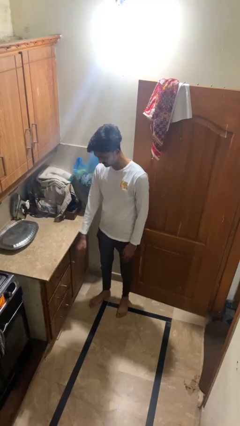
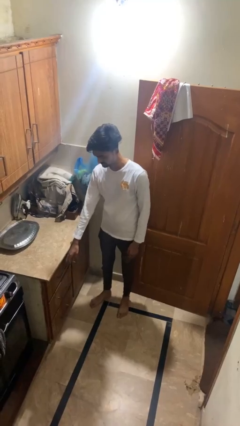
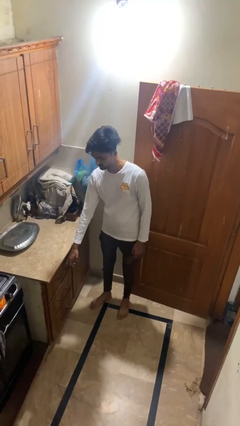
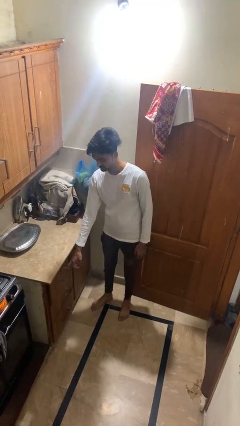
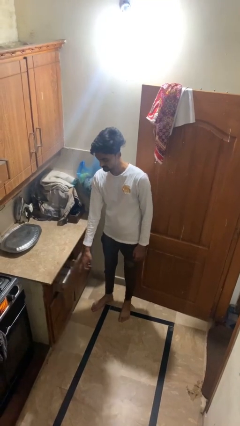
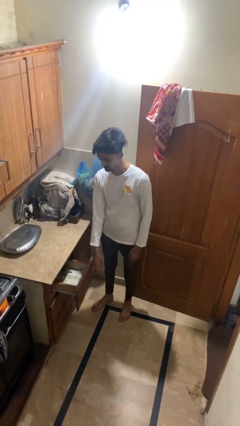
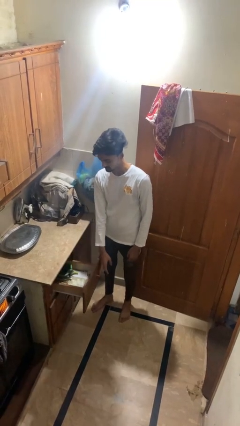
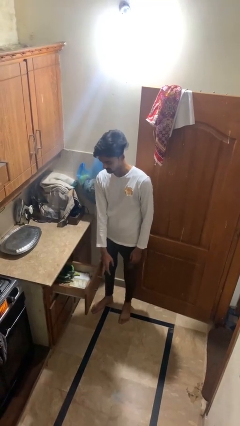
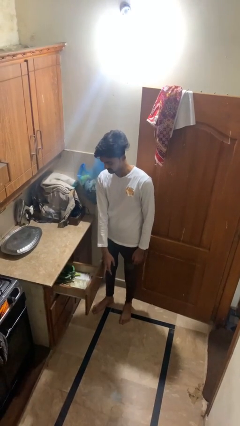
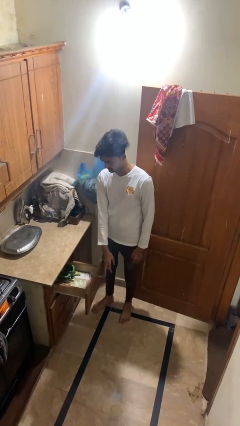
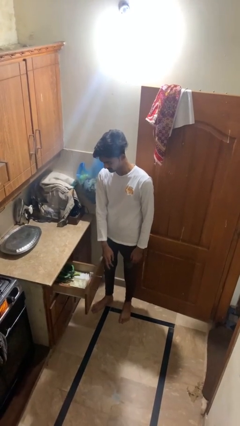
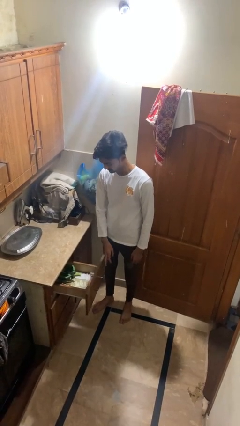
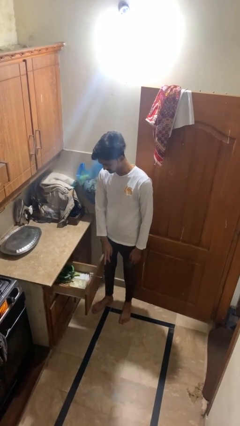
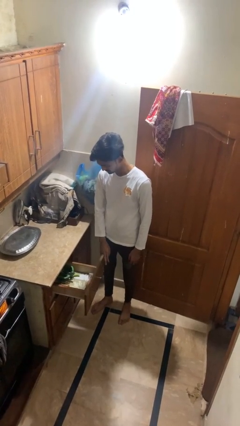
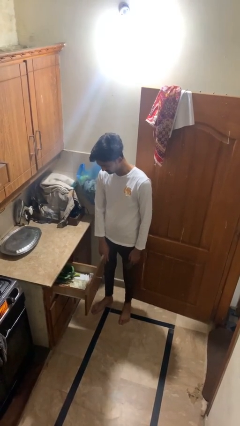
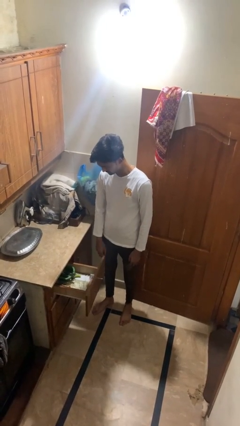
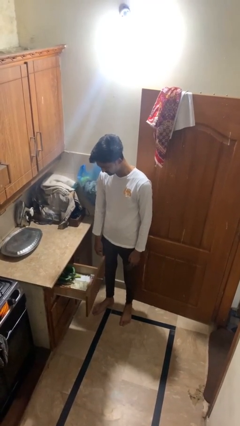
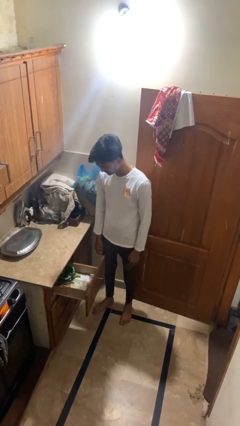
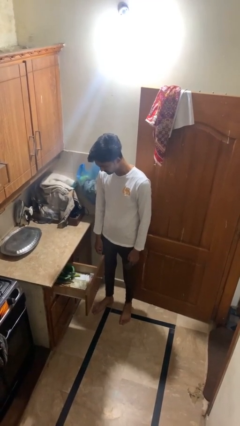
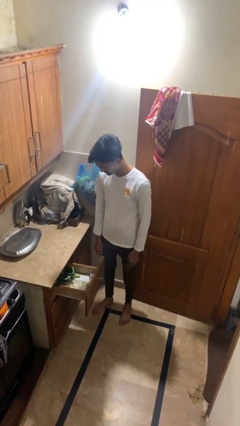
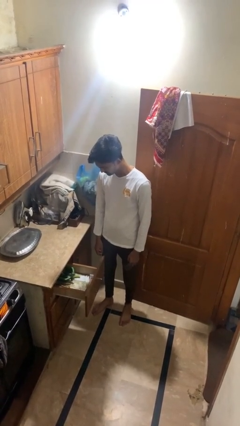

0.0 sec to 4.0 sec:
person opens kitchen drawer

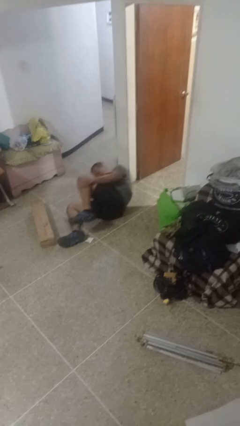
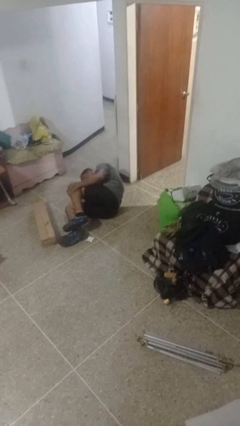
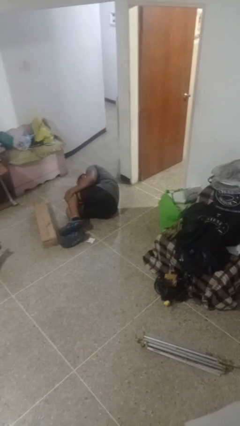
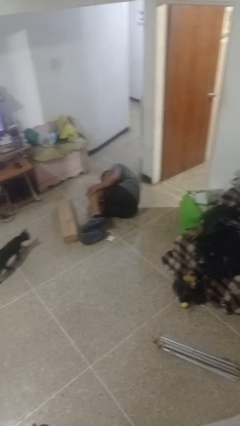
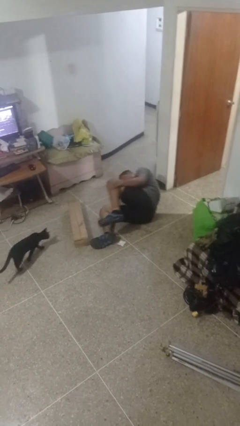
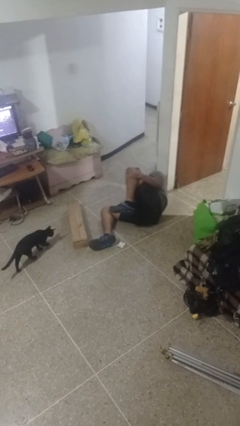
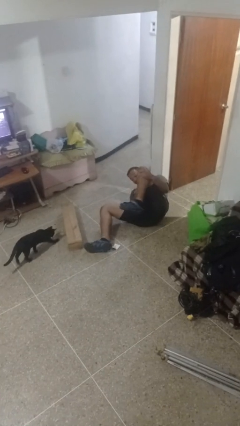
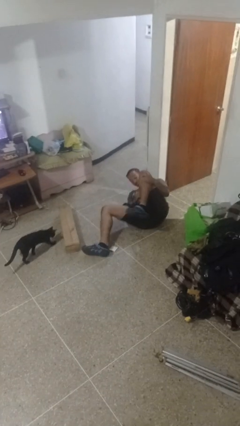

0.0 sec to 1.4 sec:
person lies down on floor

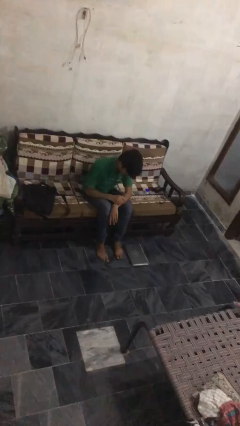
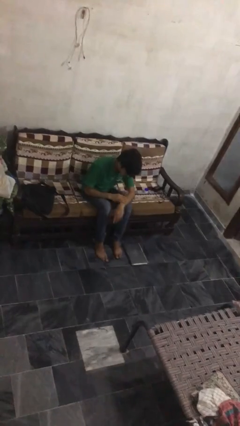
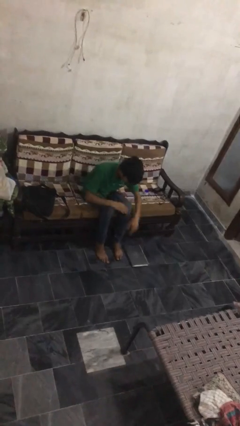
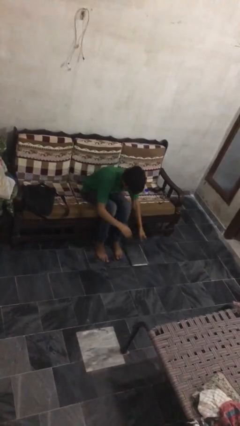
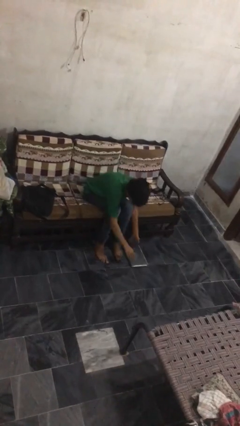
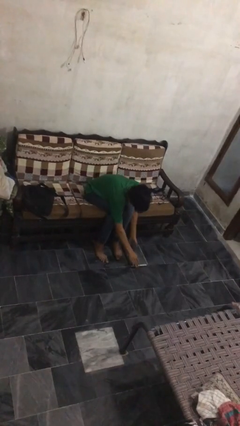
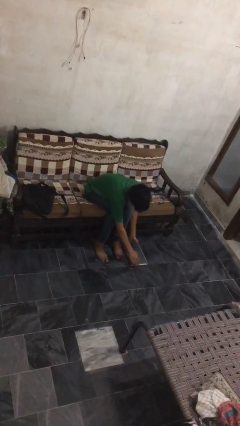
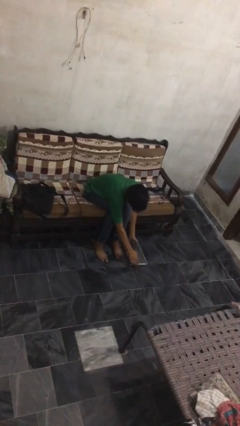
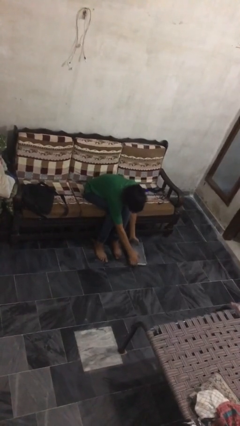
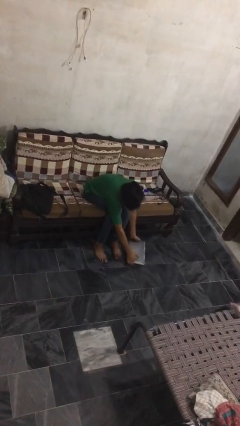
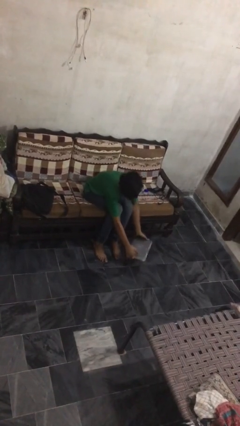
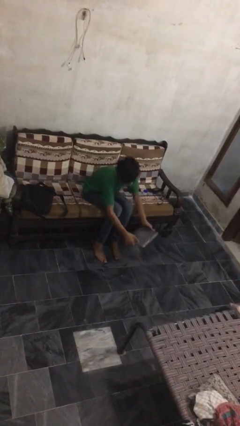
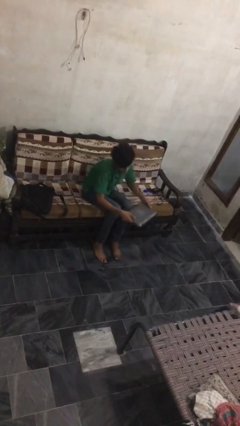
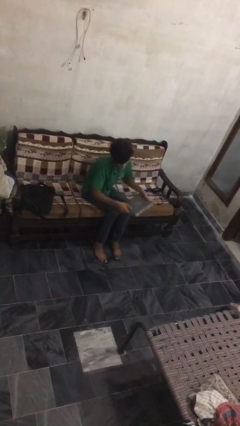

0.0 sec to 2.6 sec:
person picks up object from floor

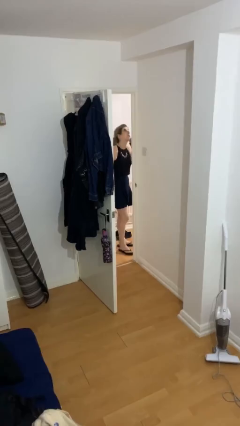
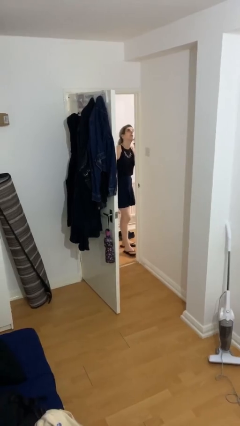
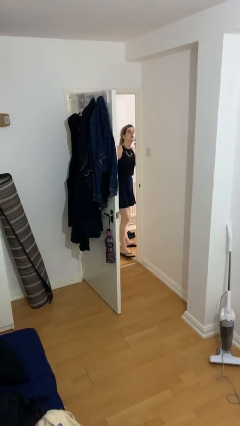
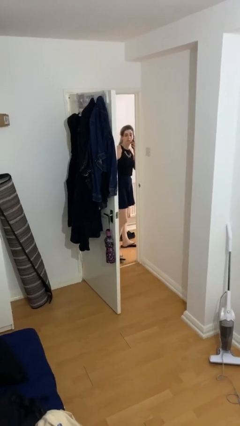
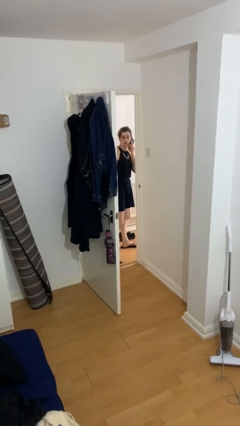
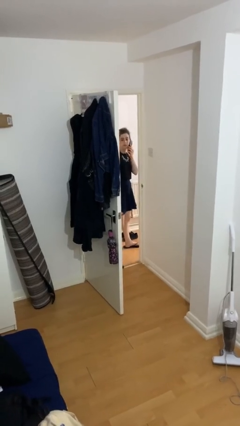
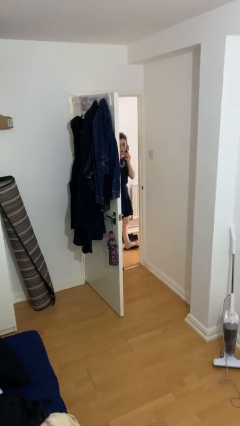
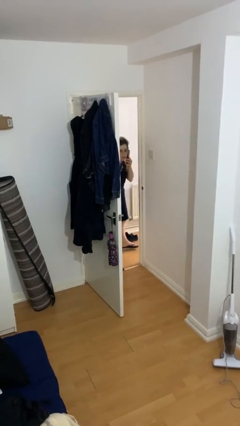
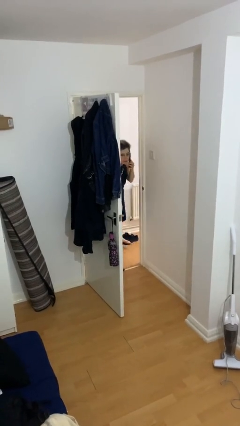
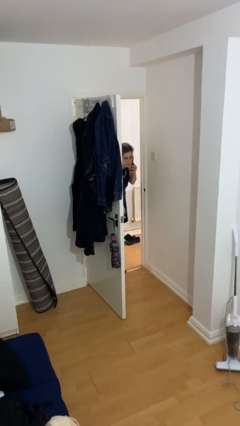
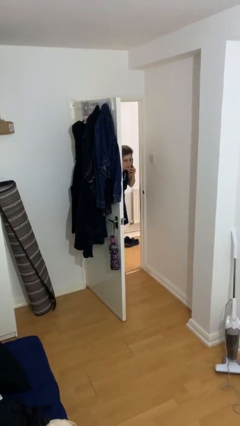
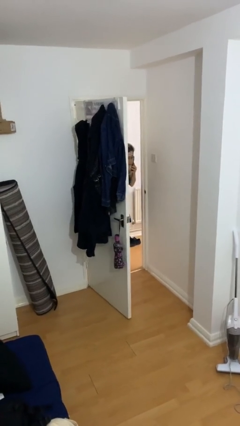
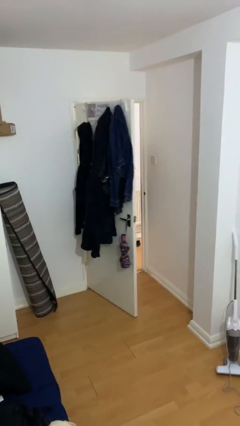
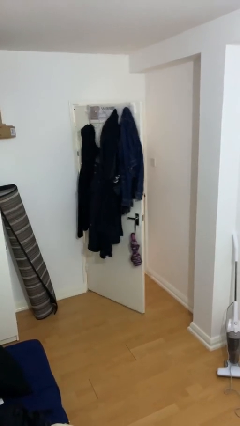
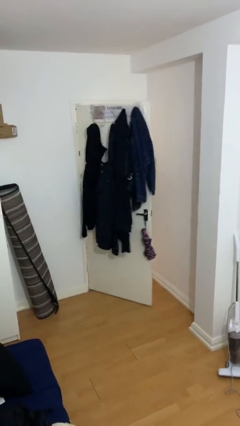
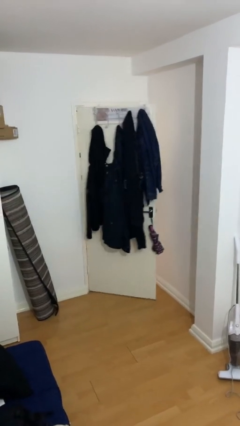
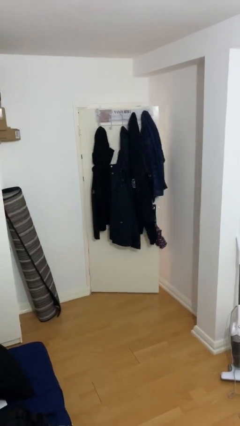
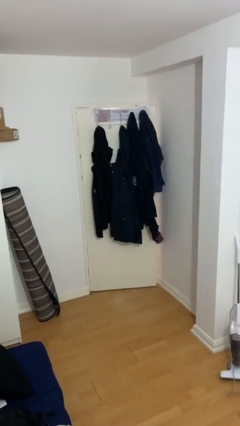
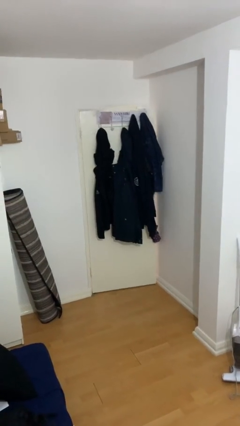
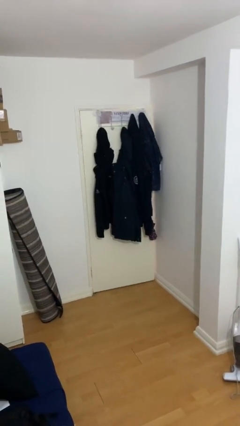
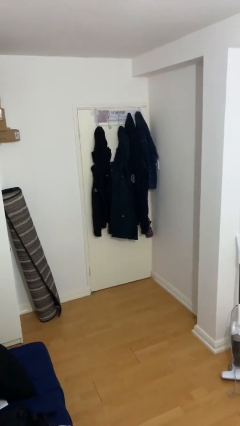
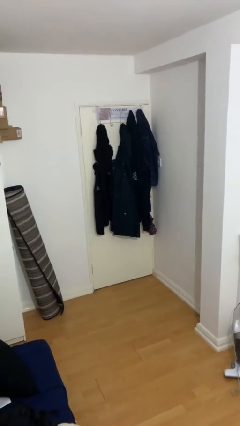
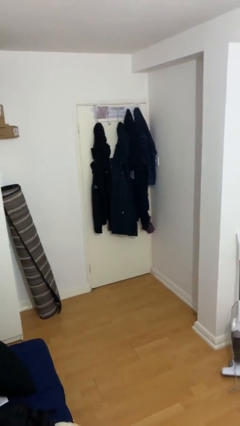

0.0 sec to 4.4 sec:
person closes facility door

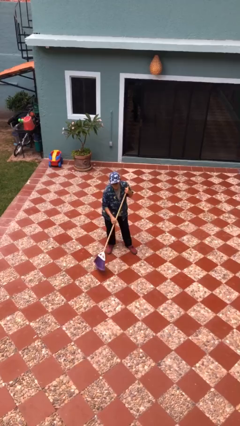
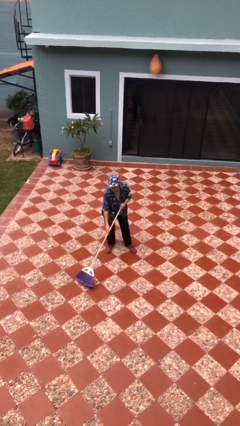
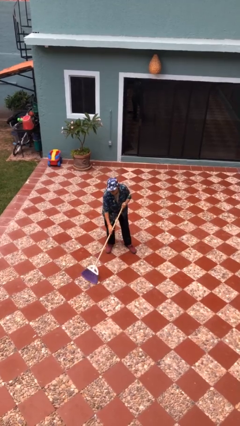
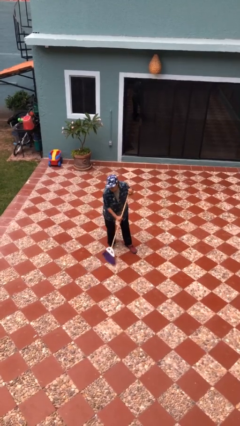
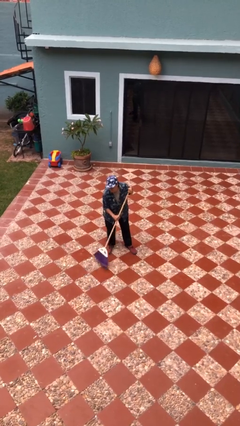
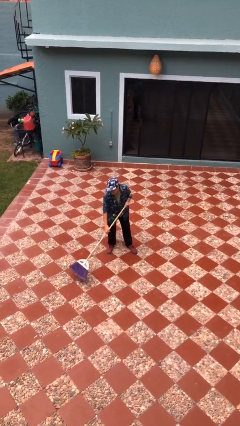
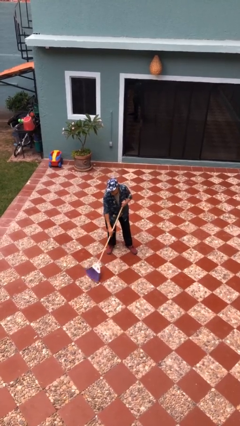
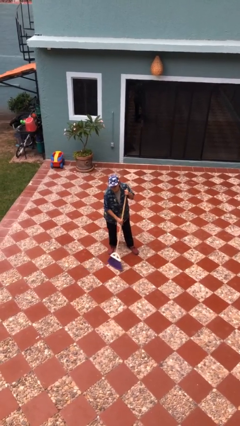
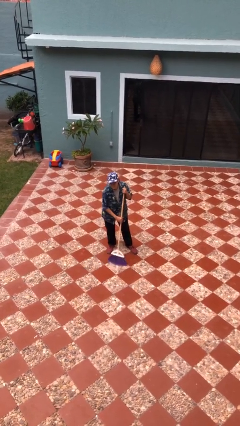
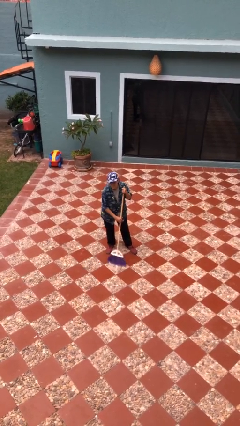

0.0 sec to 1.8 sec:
person sweeps floor

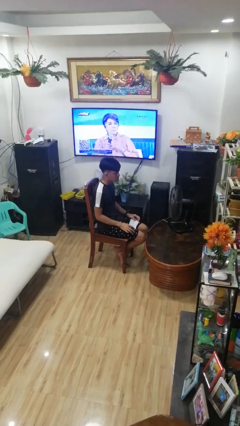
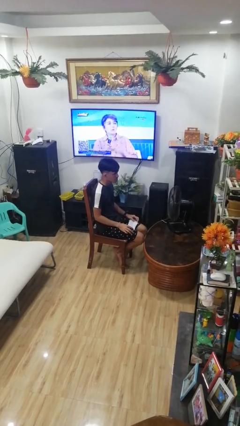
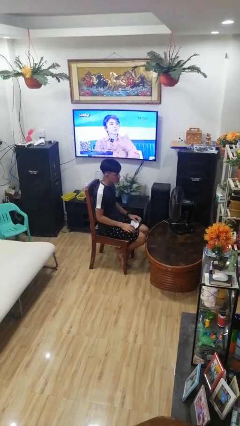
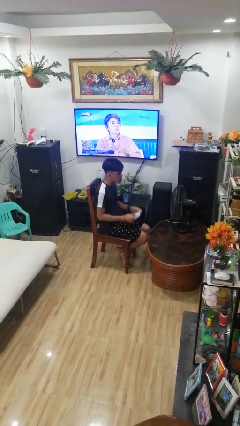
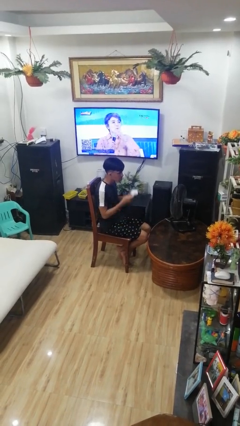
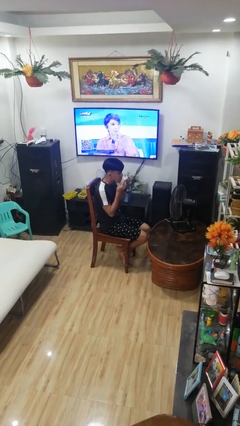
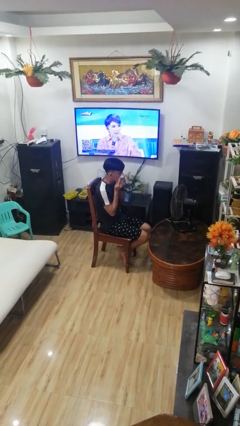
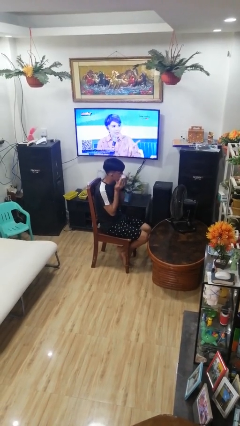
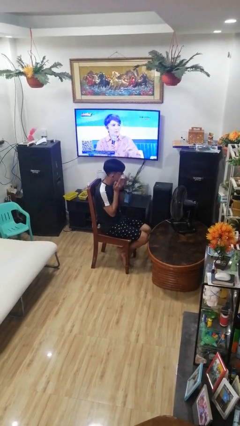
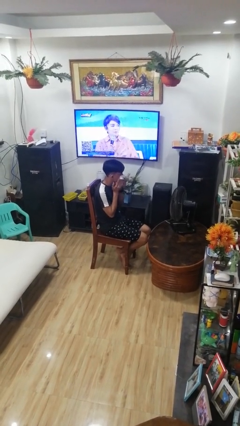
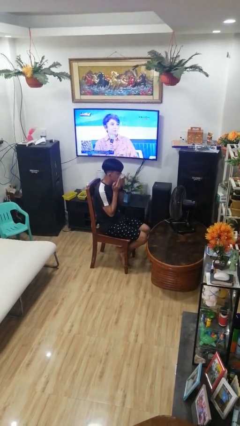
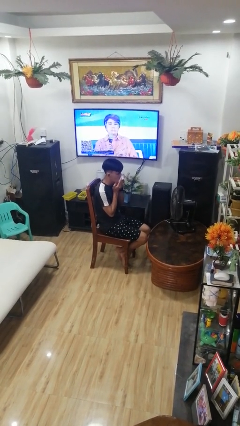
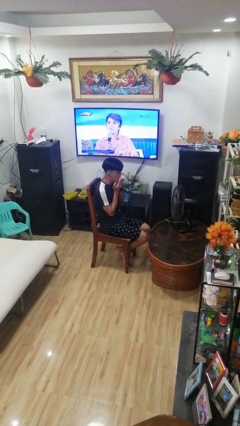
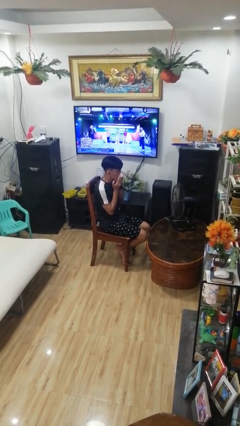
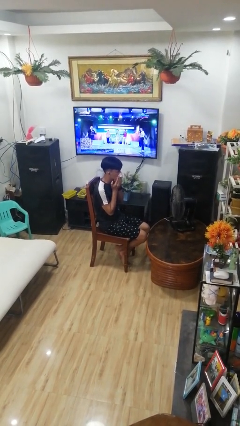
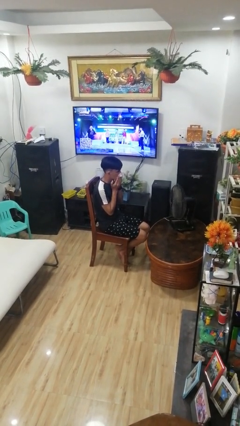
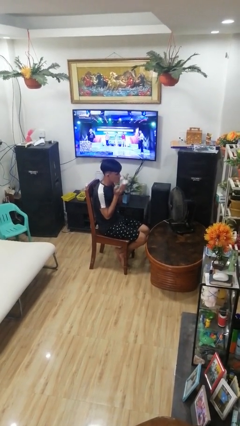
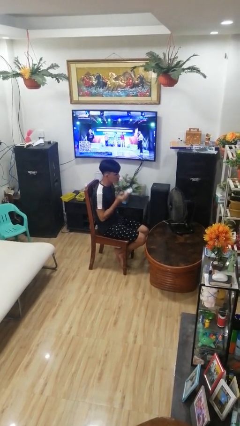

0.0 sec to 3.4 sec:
person wipes mouth with napkin
